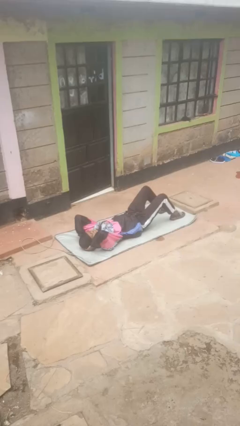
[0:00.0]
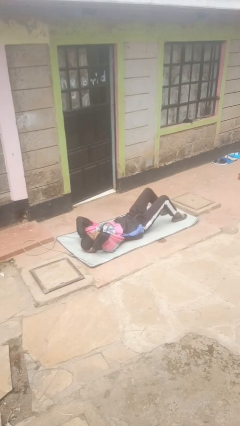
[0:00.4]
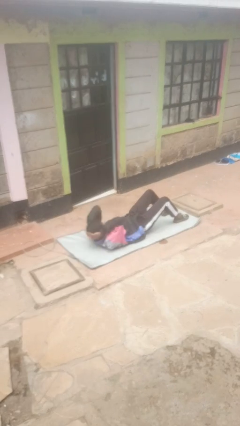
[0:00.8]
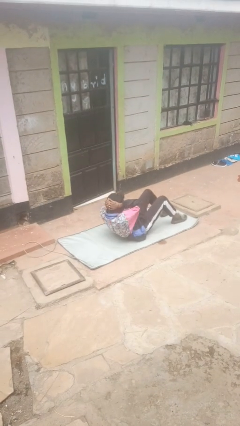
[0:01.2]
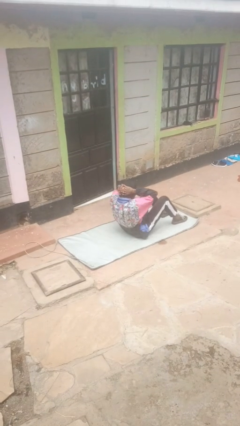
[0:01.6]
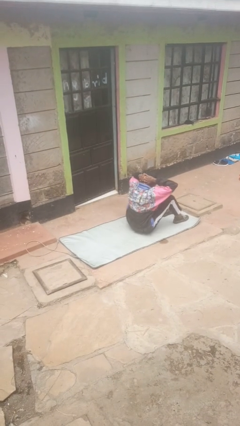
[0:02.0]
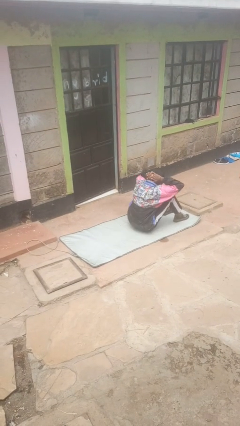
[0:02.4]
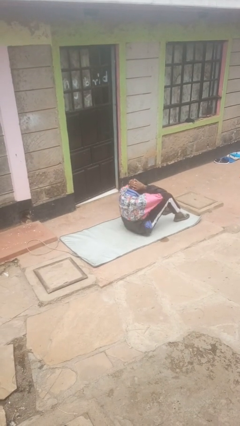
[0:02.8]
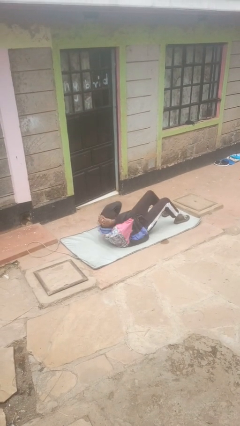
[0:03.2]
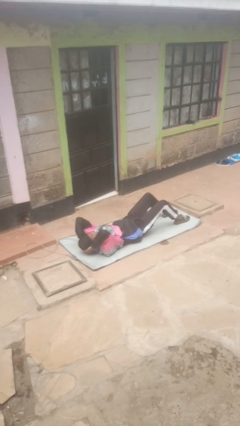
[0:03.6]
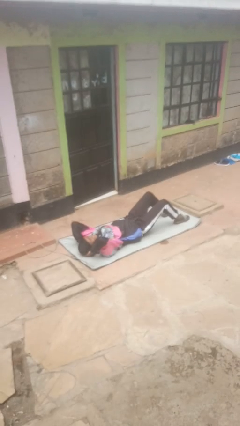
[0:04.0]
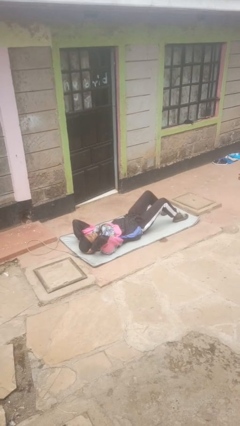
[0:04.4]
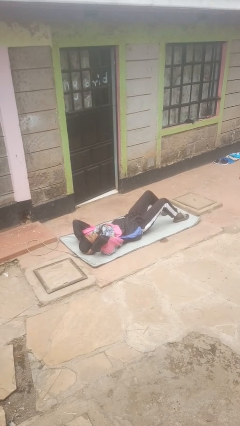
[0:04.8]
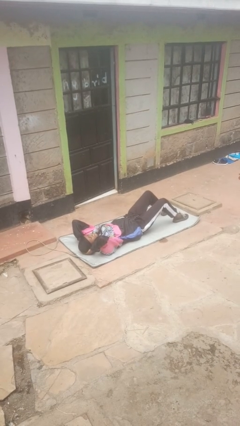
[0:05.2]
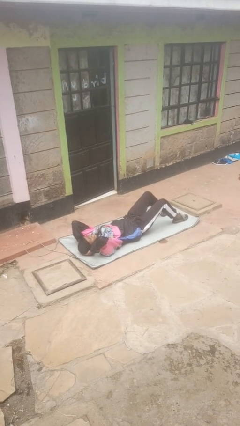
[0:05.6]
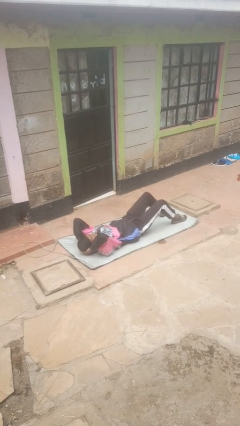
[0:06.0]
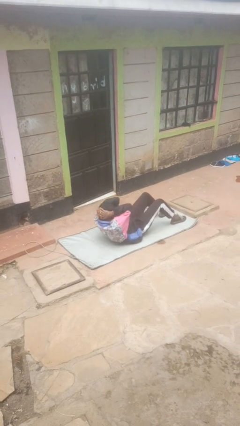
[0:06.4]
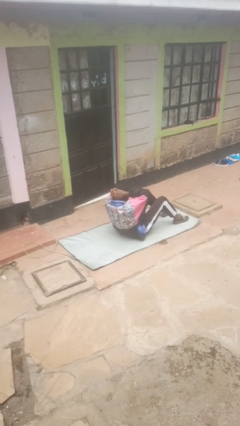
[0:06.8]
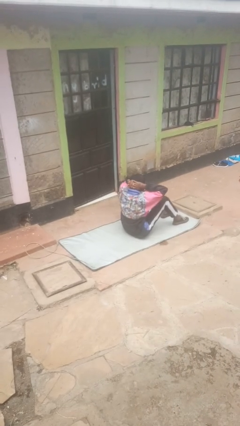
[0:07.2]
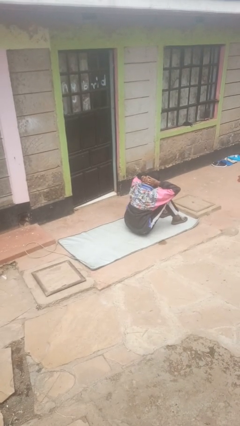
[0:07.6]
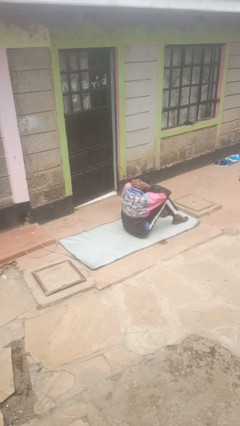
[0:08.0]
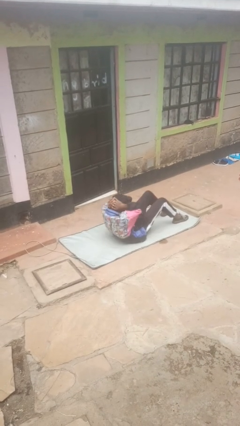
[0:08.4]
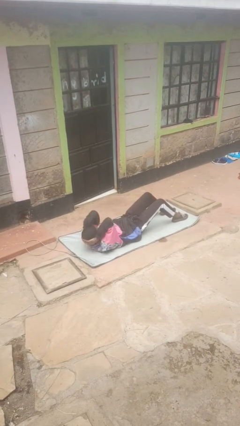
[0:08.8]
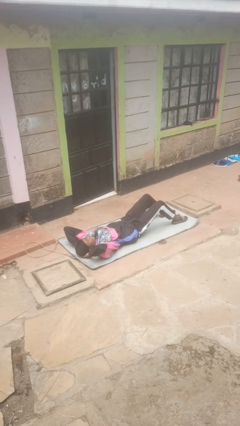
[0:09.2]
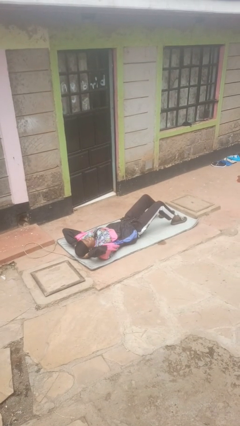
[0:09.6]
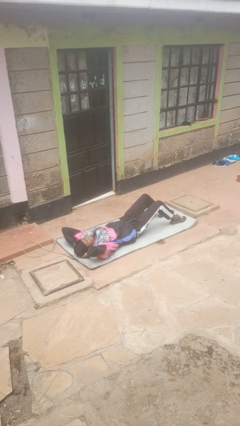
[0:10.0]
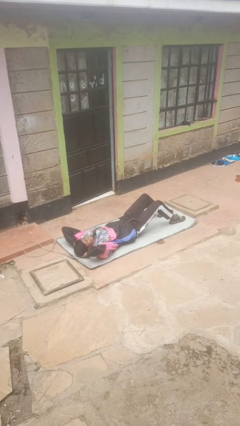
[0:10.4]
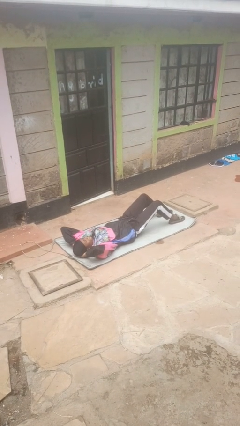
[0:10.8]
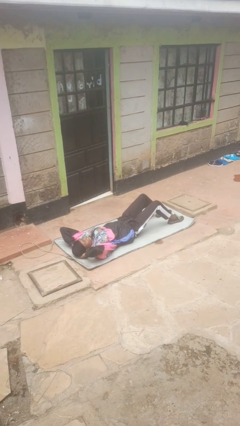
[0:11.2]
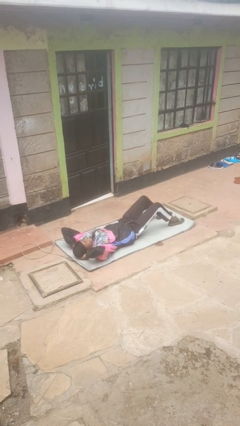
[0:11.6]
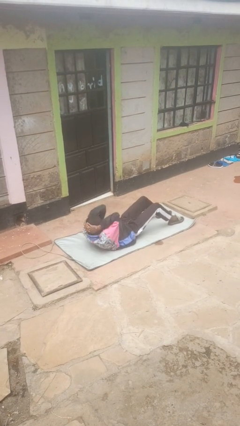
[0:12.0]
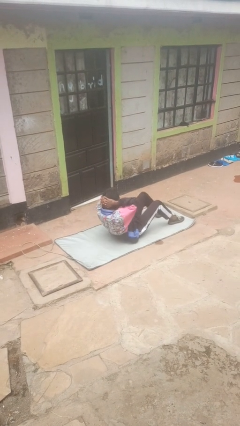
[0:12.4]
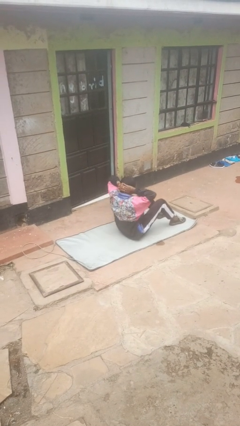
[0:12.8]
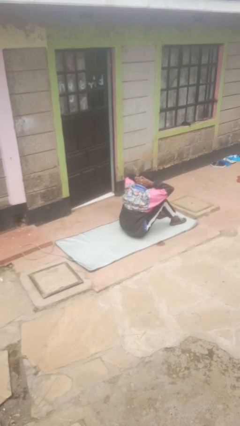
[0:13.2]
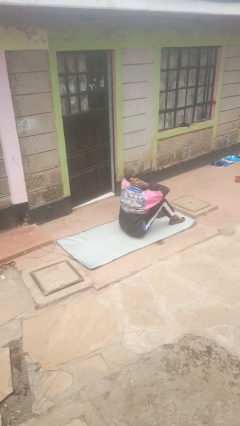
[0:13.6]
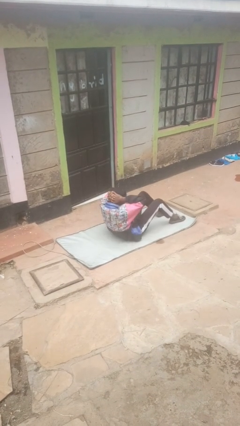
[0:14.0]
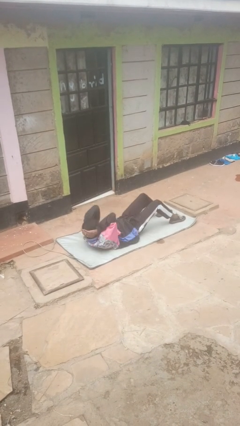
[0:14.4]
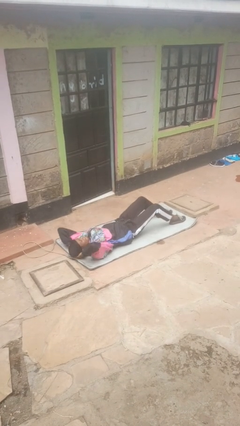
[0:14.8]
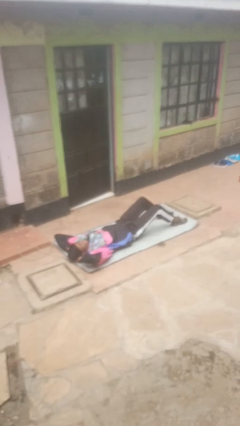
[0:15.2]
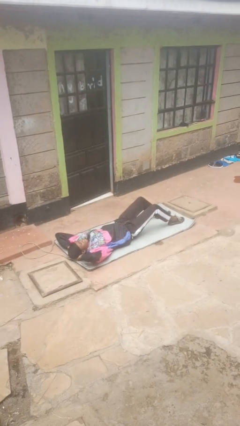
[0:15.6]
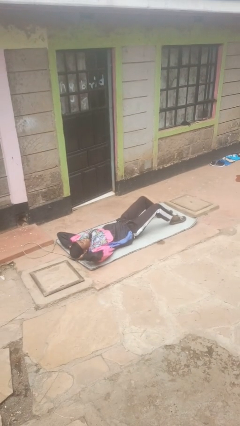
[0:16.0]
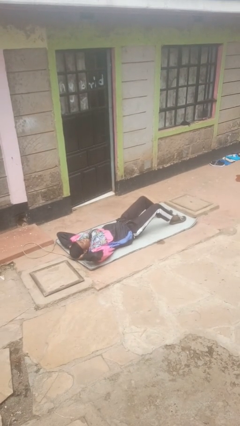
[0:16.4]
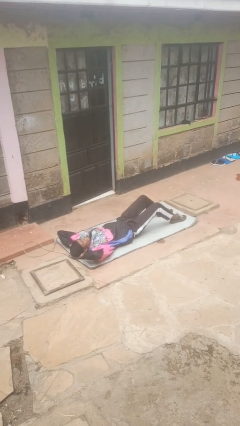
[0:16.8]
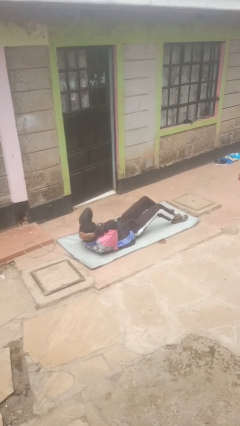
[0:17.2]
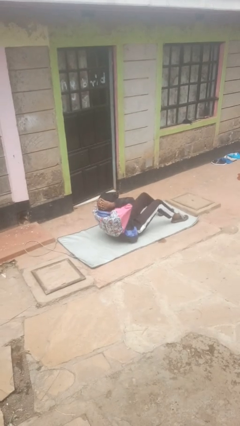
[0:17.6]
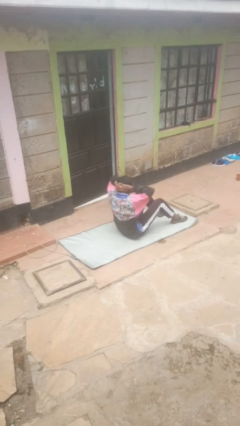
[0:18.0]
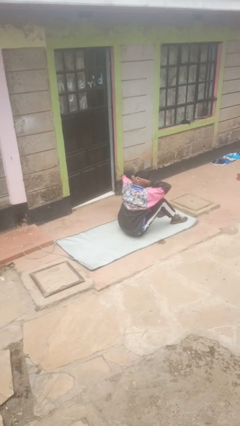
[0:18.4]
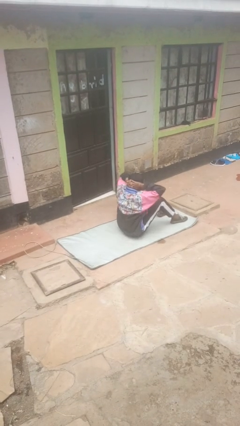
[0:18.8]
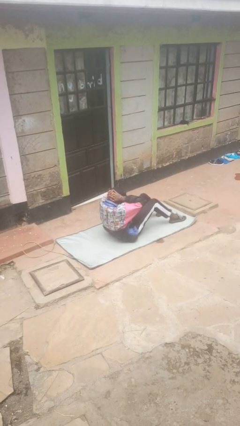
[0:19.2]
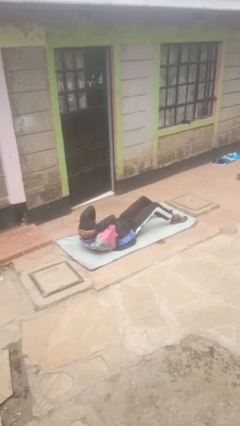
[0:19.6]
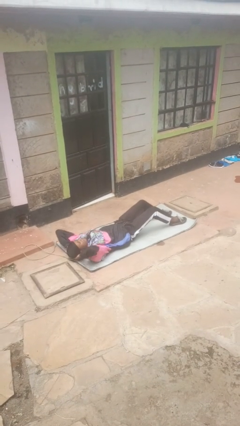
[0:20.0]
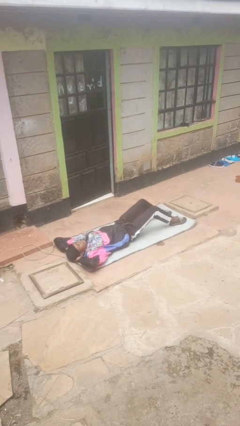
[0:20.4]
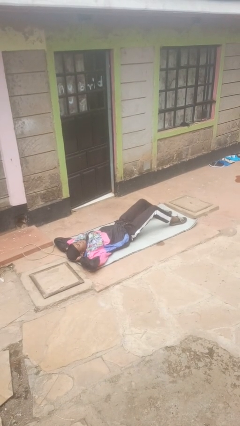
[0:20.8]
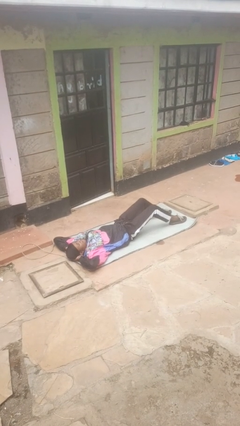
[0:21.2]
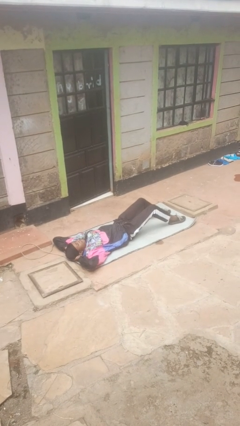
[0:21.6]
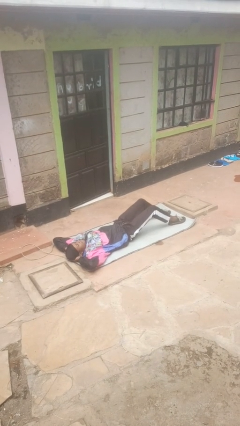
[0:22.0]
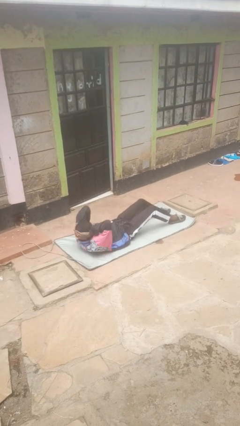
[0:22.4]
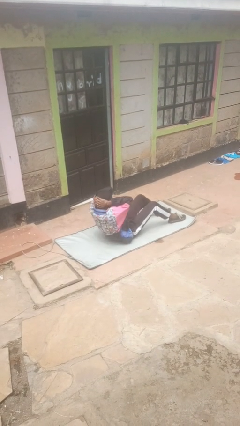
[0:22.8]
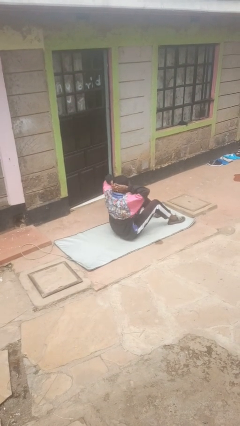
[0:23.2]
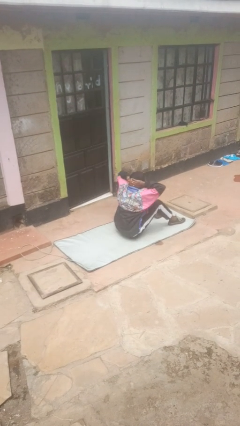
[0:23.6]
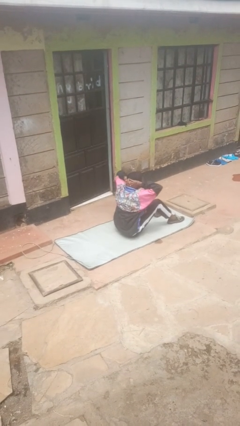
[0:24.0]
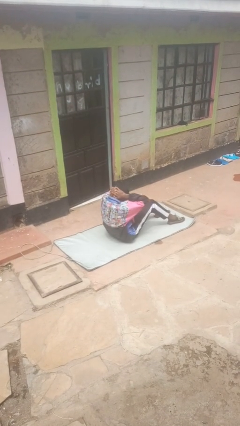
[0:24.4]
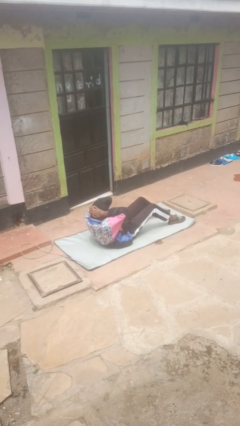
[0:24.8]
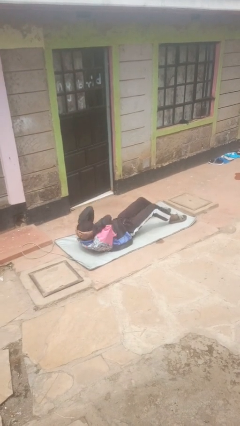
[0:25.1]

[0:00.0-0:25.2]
person exercises with situp

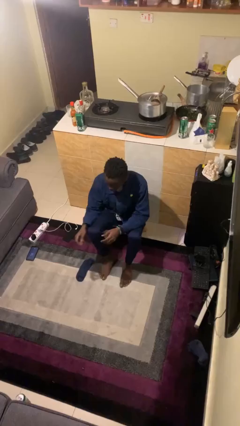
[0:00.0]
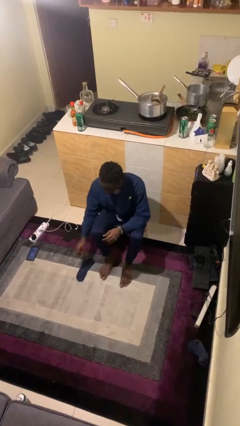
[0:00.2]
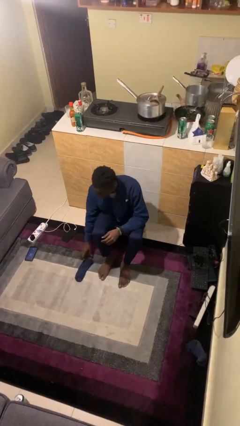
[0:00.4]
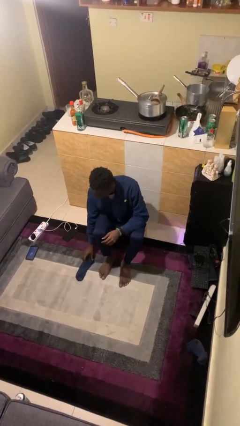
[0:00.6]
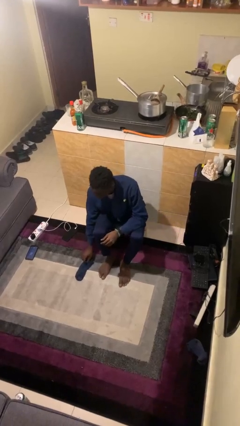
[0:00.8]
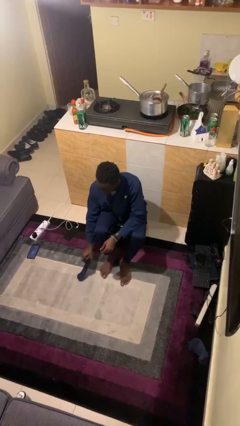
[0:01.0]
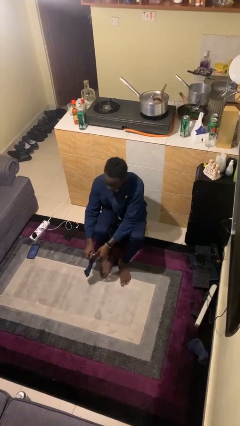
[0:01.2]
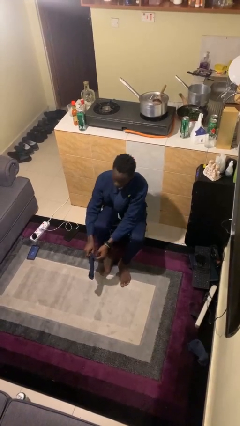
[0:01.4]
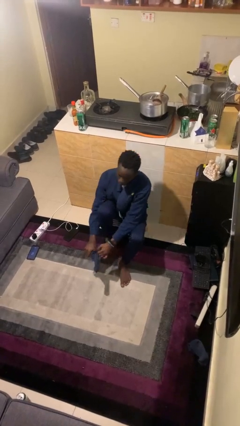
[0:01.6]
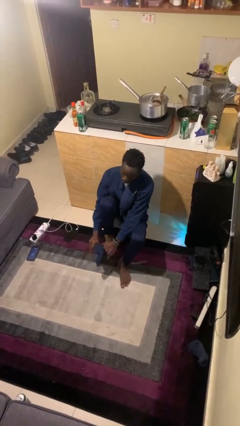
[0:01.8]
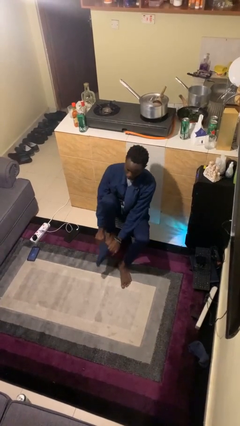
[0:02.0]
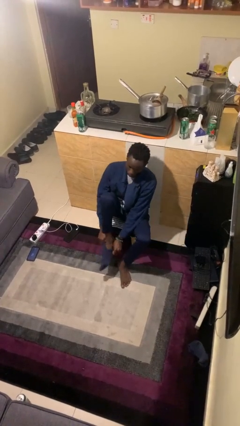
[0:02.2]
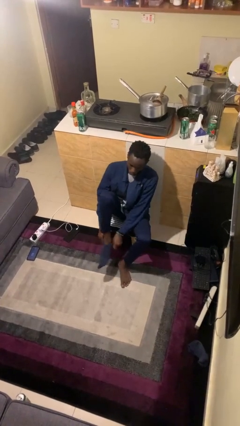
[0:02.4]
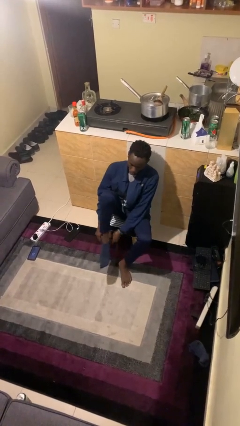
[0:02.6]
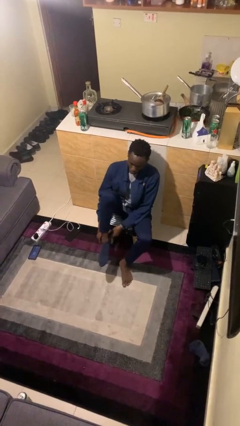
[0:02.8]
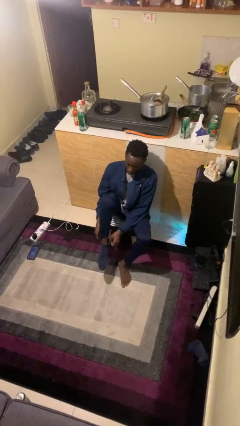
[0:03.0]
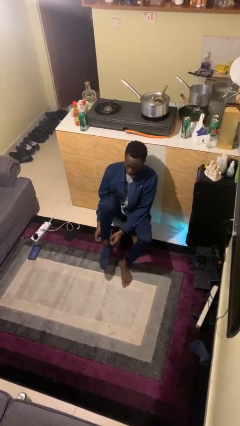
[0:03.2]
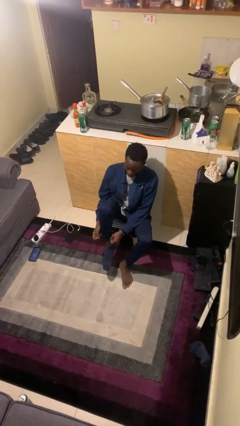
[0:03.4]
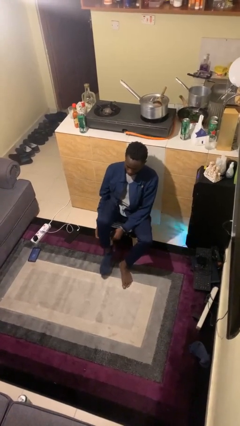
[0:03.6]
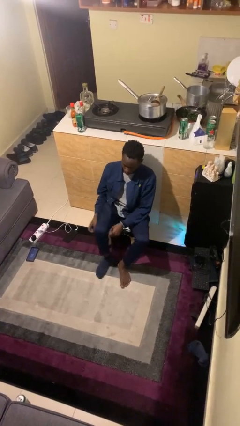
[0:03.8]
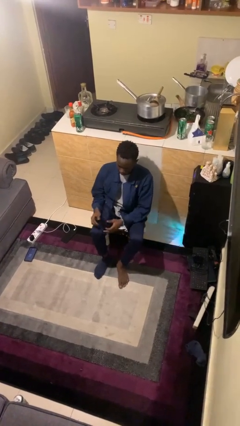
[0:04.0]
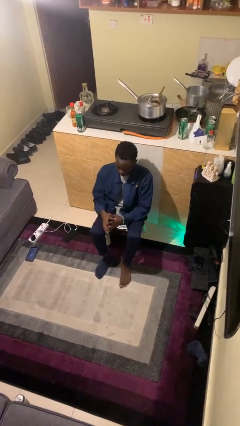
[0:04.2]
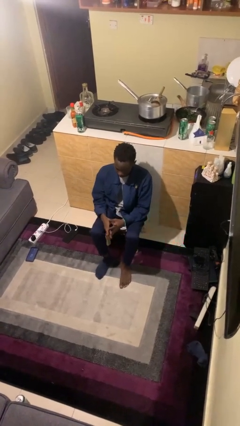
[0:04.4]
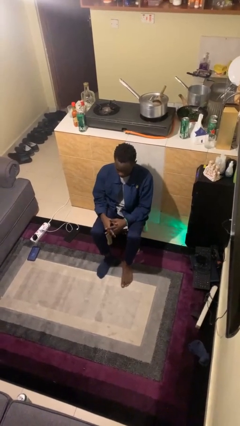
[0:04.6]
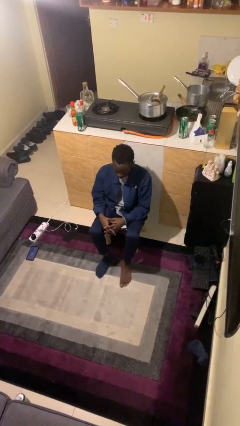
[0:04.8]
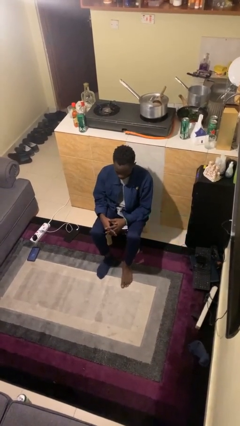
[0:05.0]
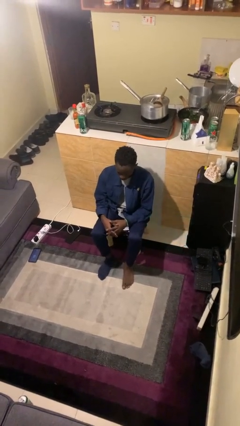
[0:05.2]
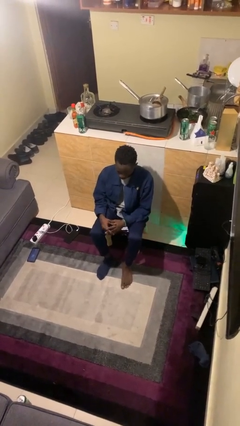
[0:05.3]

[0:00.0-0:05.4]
person puts on socks

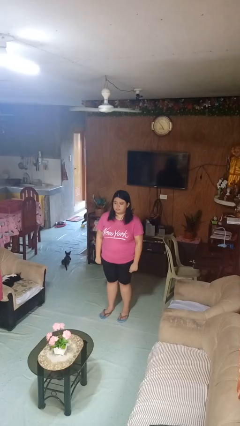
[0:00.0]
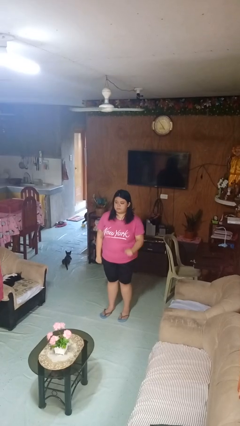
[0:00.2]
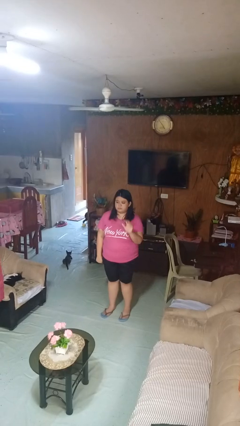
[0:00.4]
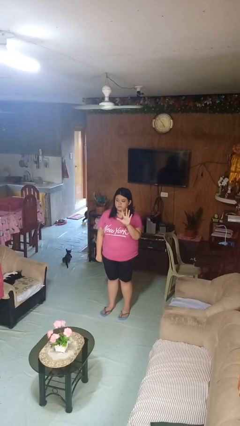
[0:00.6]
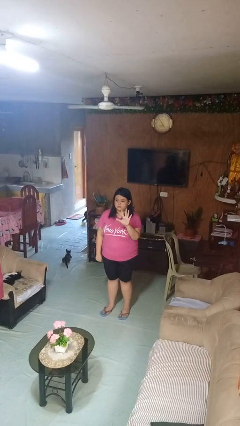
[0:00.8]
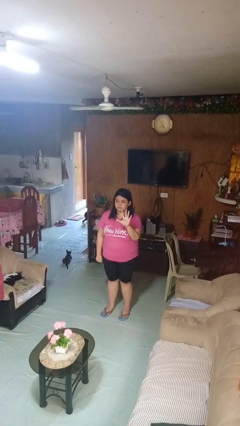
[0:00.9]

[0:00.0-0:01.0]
person gestures number five
